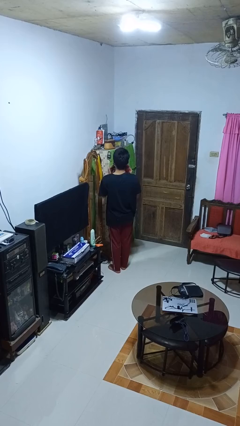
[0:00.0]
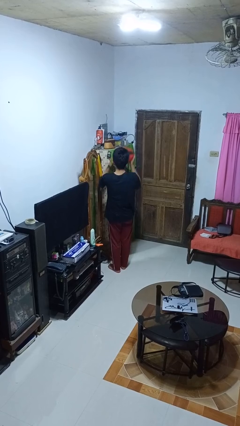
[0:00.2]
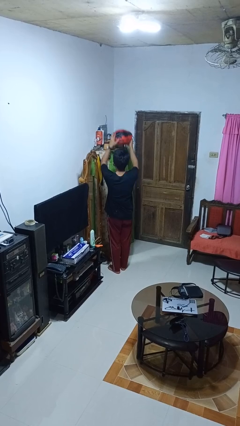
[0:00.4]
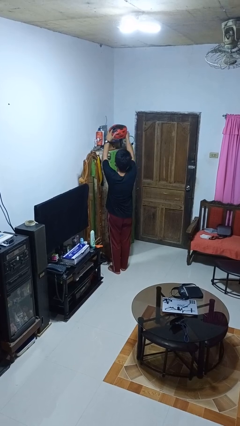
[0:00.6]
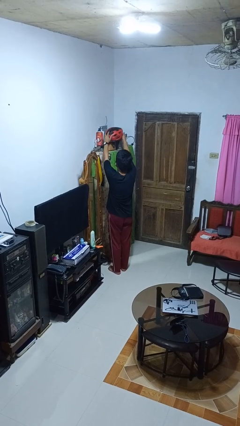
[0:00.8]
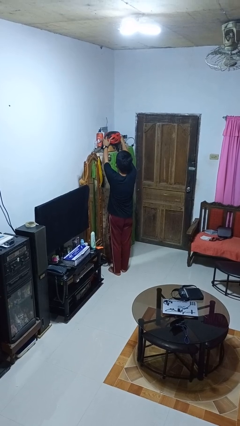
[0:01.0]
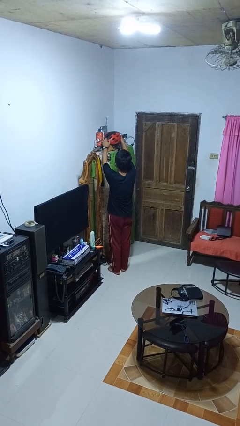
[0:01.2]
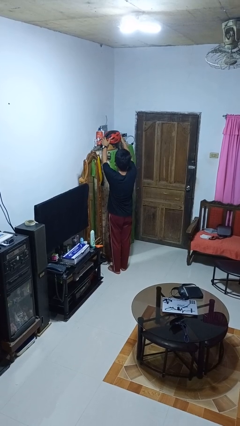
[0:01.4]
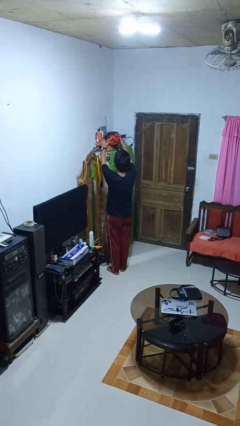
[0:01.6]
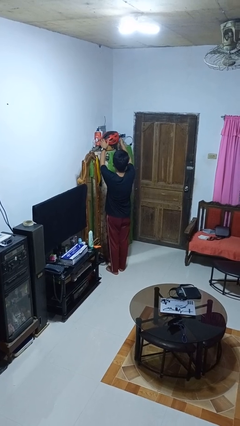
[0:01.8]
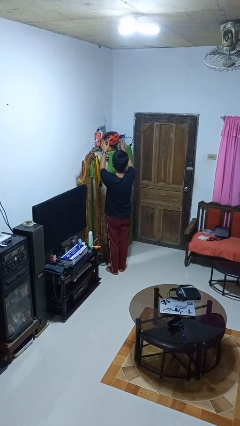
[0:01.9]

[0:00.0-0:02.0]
person puts down object on shelf

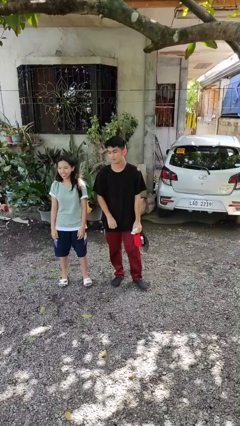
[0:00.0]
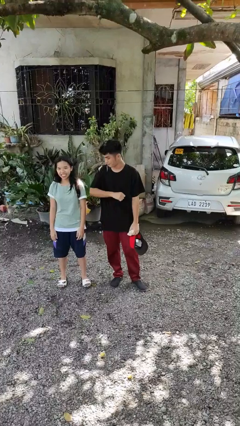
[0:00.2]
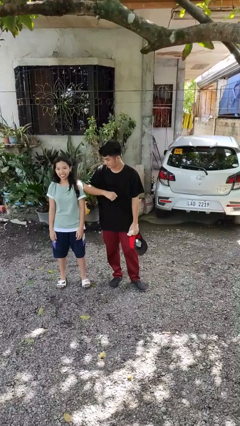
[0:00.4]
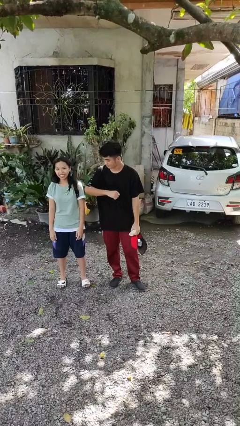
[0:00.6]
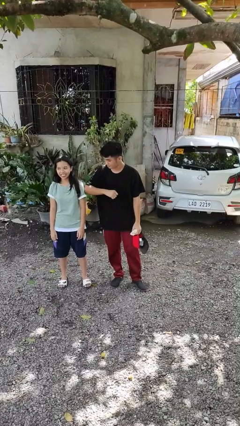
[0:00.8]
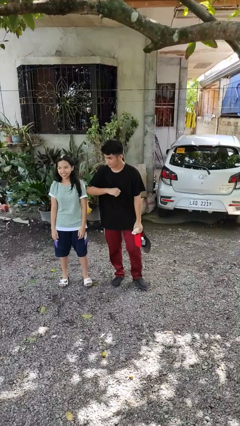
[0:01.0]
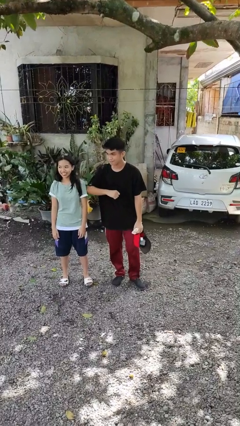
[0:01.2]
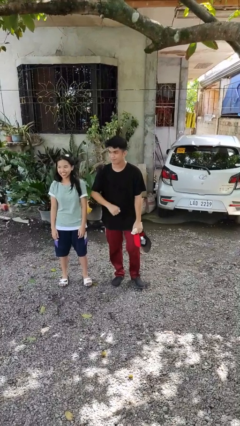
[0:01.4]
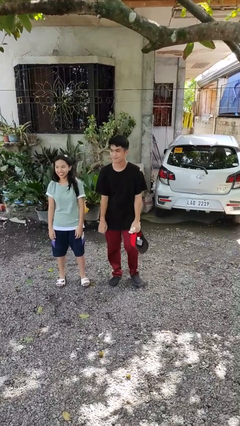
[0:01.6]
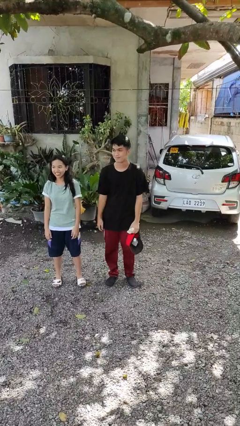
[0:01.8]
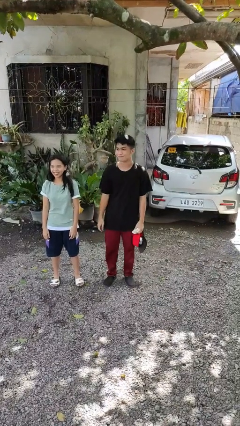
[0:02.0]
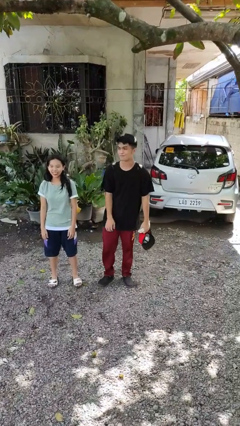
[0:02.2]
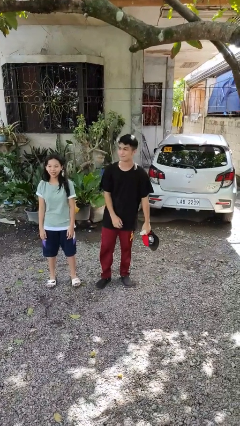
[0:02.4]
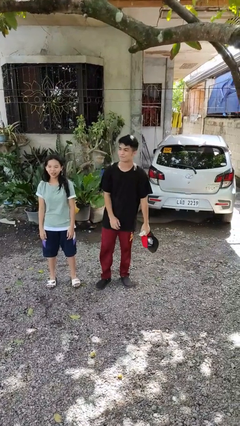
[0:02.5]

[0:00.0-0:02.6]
person nudges person with elbow

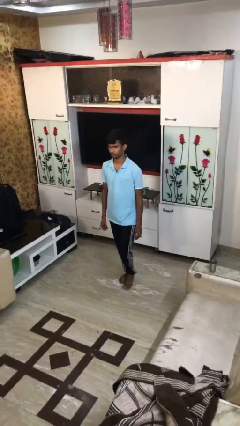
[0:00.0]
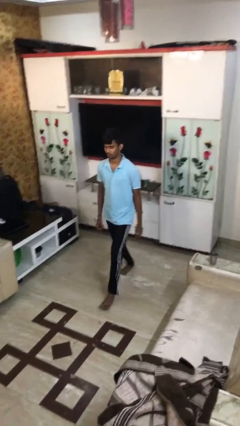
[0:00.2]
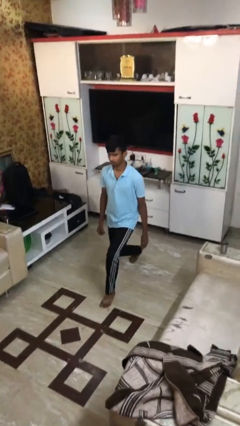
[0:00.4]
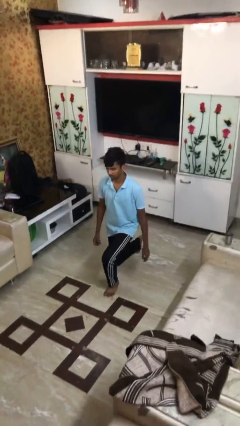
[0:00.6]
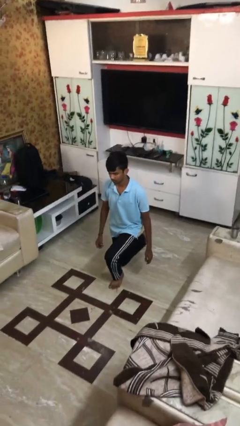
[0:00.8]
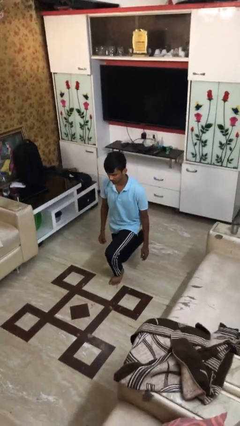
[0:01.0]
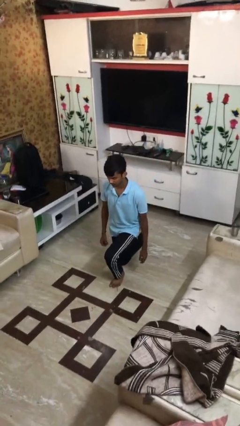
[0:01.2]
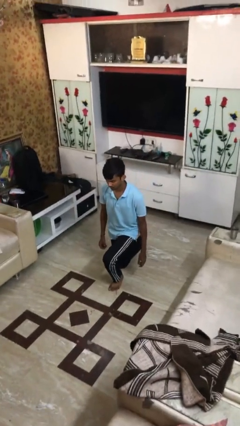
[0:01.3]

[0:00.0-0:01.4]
person exercises with lunges

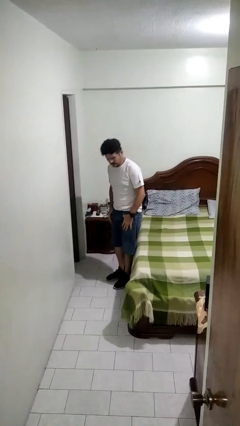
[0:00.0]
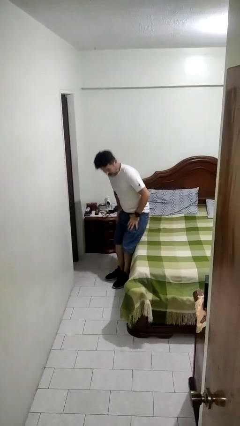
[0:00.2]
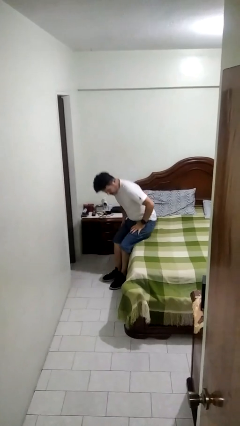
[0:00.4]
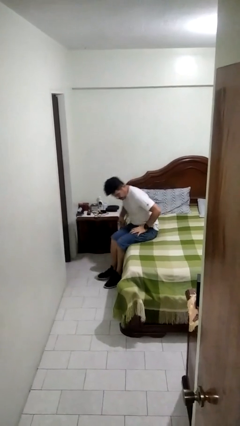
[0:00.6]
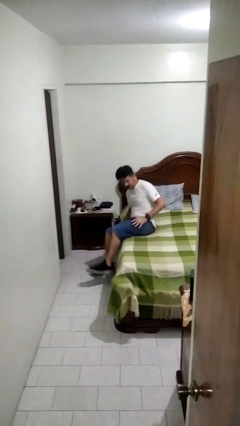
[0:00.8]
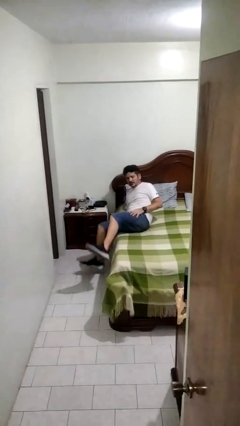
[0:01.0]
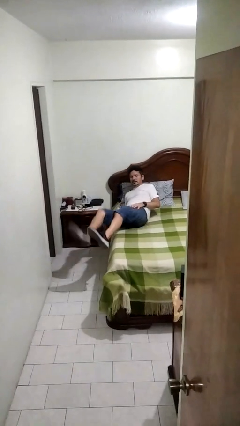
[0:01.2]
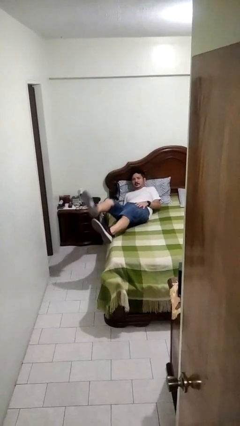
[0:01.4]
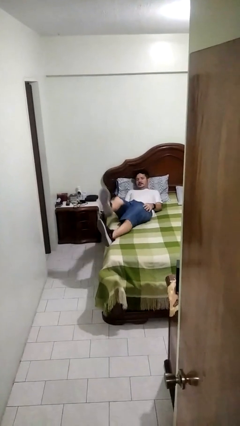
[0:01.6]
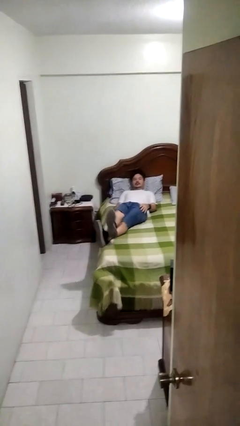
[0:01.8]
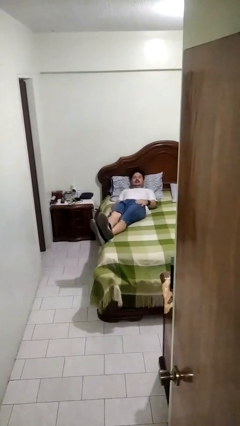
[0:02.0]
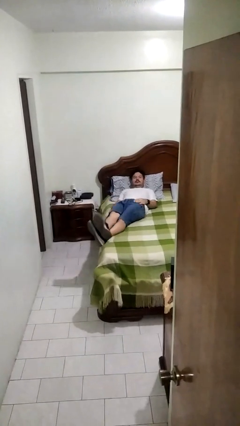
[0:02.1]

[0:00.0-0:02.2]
person lies down on bed

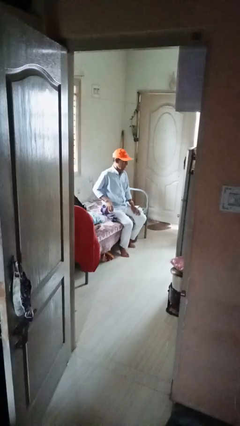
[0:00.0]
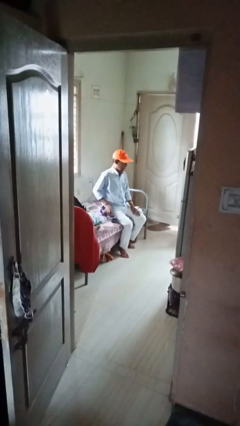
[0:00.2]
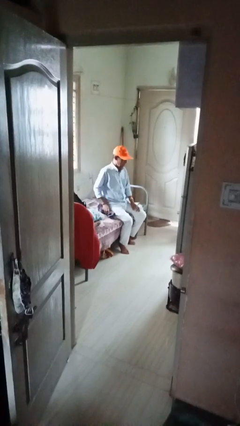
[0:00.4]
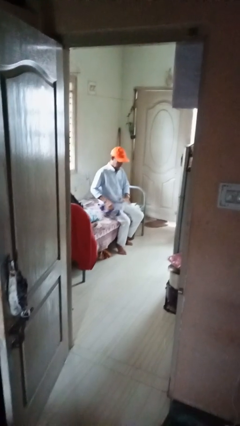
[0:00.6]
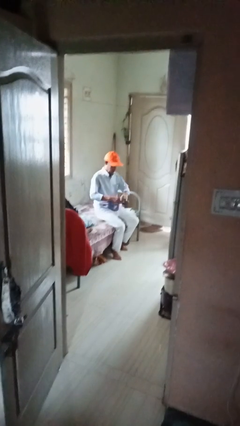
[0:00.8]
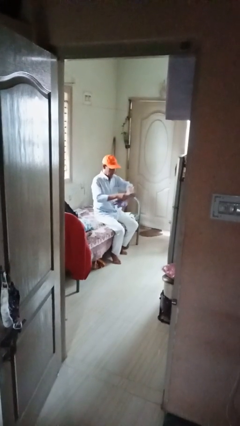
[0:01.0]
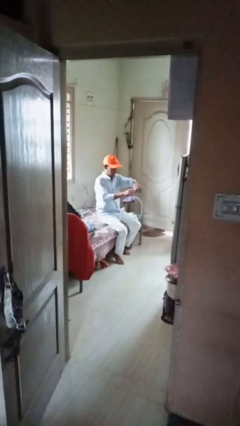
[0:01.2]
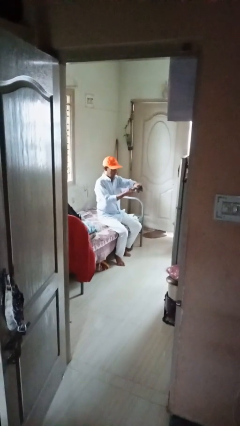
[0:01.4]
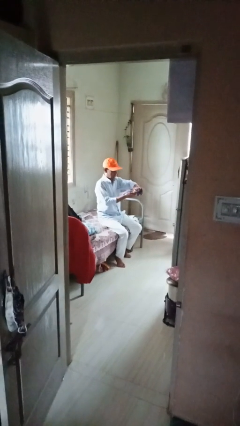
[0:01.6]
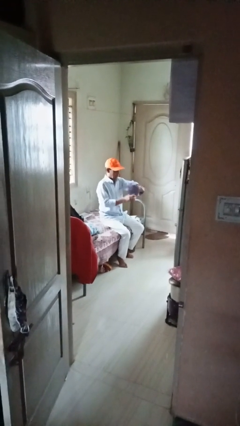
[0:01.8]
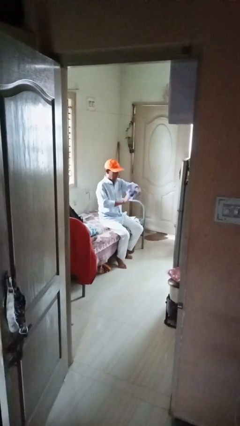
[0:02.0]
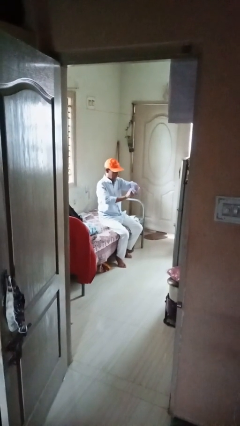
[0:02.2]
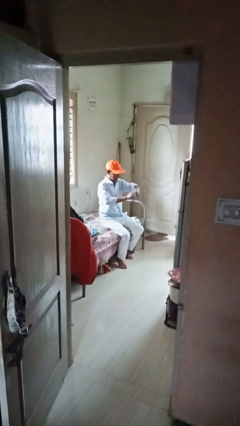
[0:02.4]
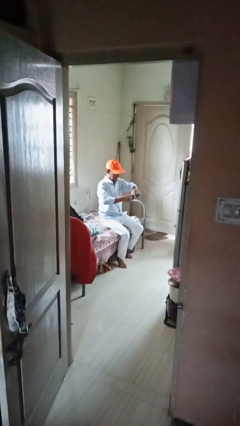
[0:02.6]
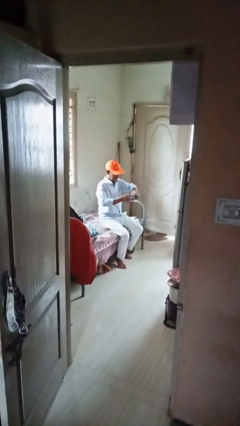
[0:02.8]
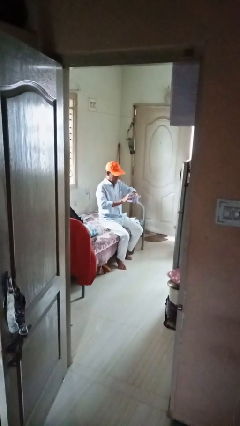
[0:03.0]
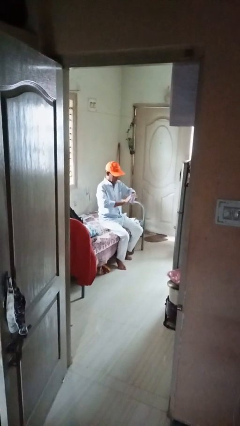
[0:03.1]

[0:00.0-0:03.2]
person squeezes object

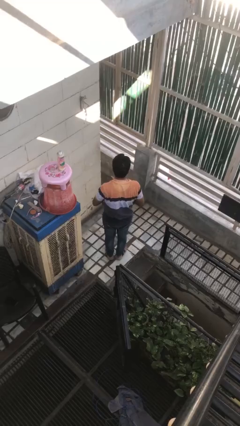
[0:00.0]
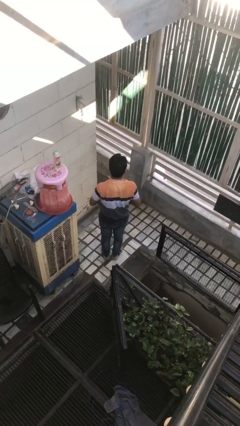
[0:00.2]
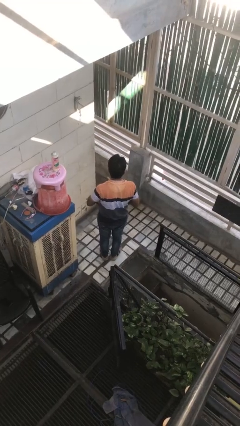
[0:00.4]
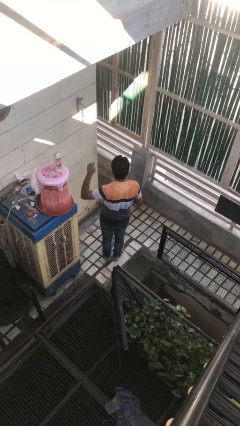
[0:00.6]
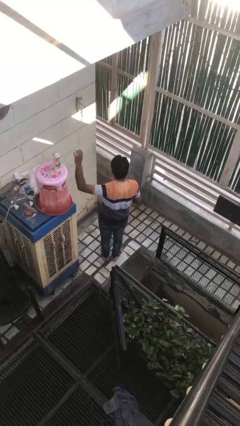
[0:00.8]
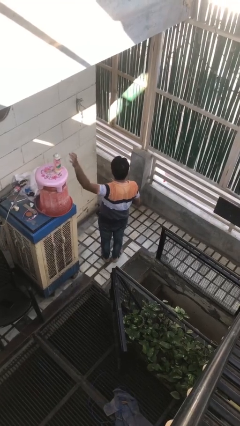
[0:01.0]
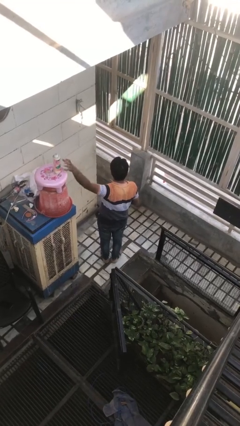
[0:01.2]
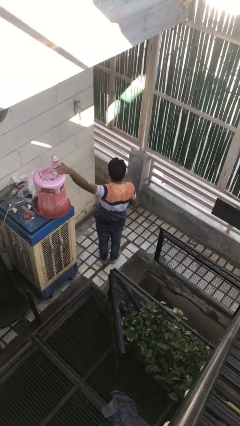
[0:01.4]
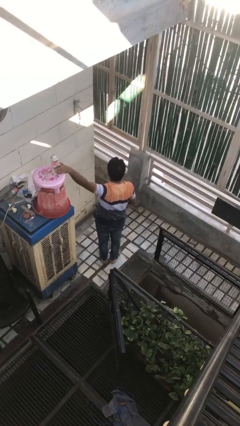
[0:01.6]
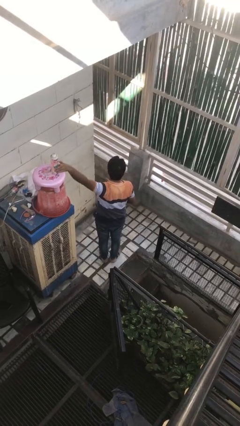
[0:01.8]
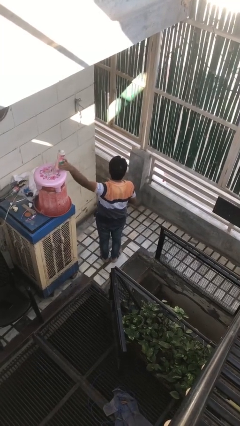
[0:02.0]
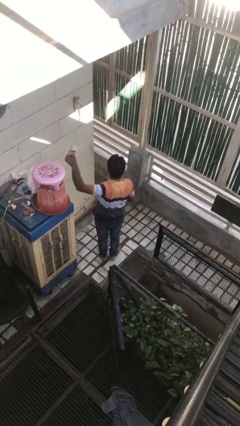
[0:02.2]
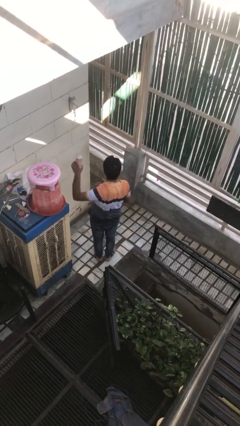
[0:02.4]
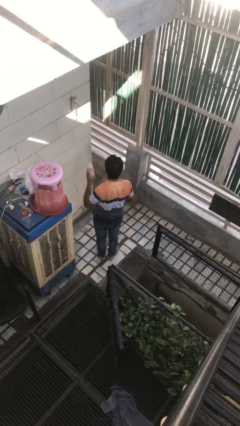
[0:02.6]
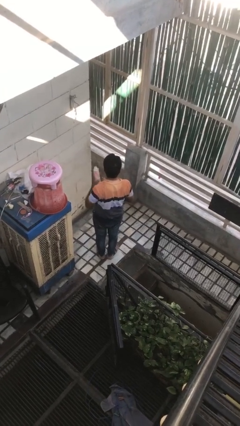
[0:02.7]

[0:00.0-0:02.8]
person picks up object from countertop

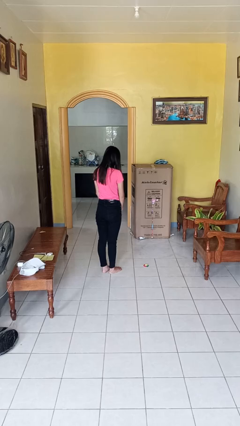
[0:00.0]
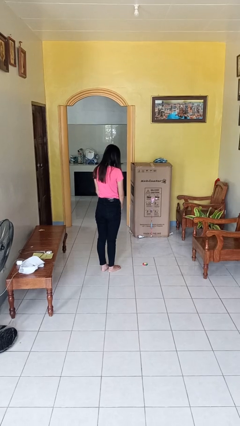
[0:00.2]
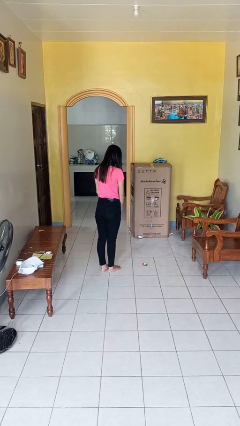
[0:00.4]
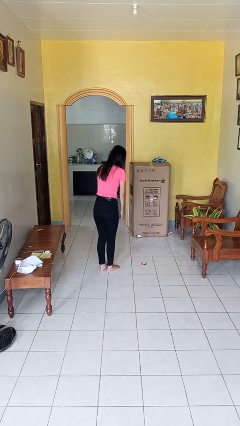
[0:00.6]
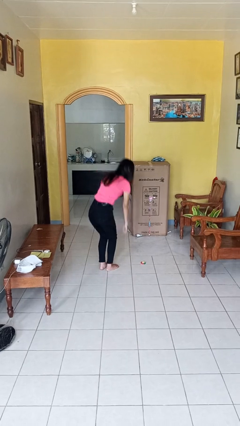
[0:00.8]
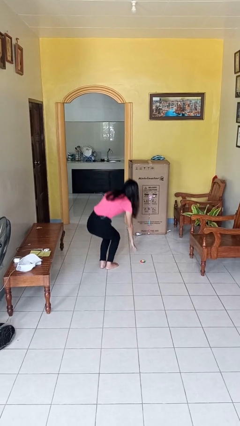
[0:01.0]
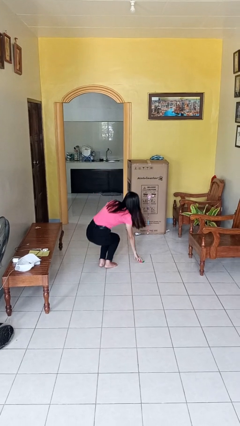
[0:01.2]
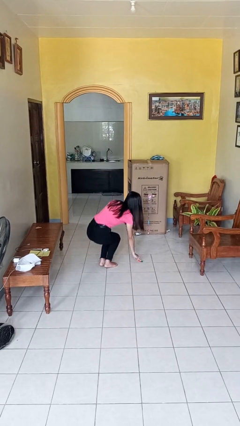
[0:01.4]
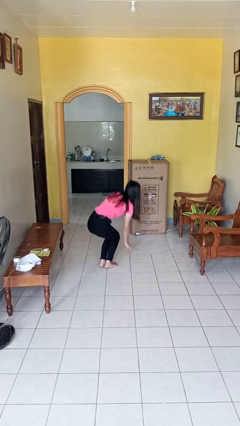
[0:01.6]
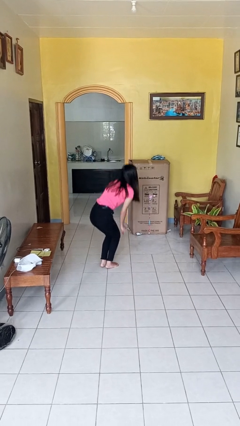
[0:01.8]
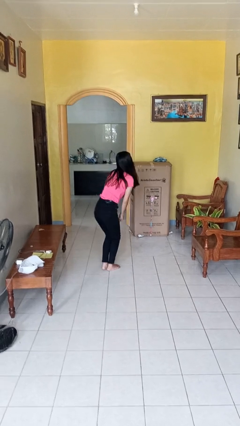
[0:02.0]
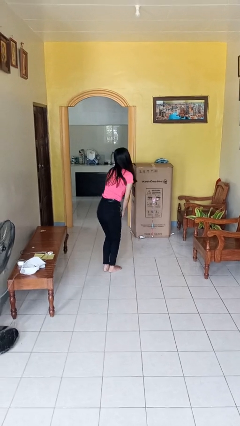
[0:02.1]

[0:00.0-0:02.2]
person picks up object from floor
